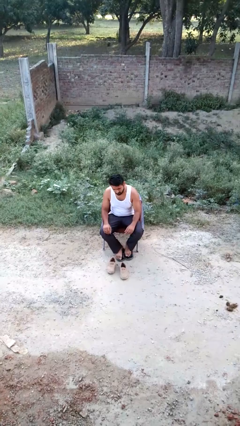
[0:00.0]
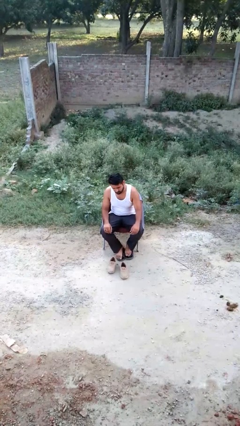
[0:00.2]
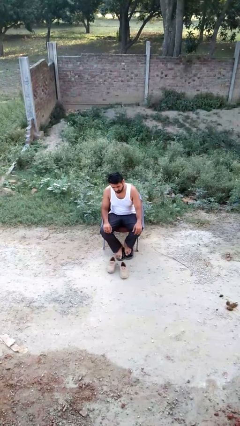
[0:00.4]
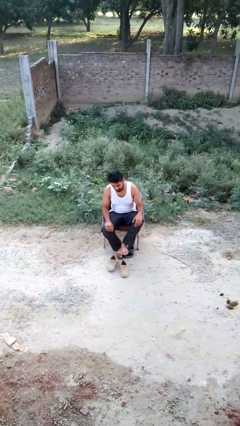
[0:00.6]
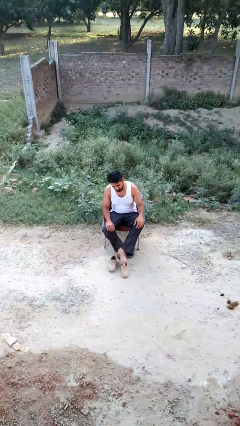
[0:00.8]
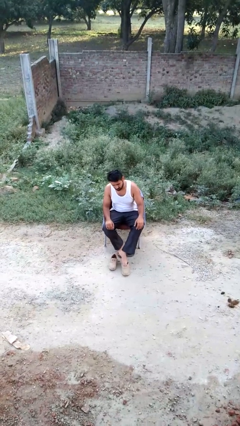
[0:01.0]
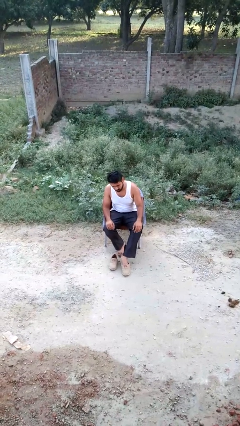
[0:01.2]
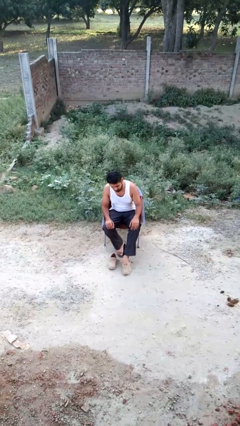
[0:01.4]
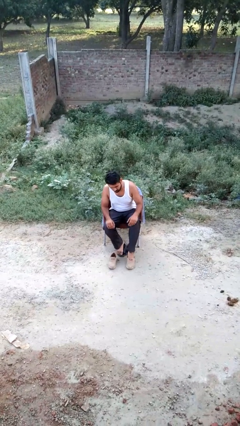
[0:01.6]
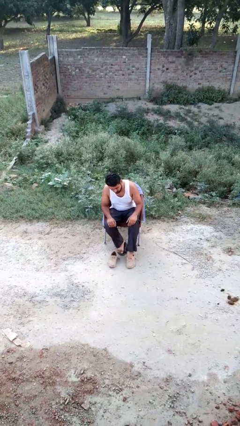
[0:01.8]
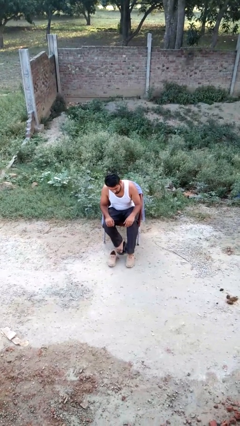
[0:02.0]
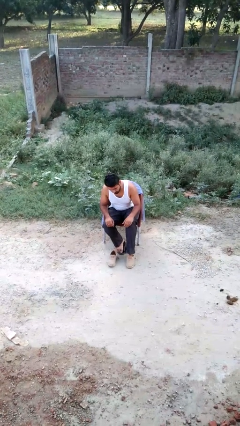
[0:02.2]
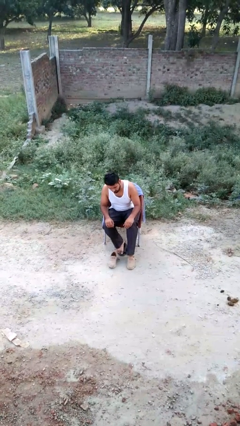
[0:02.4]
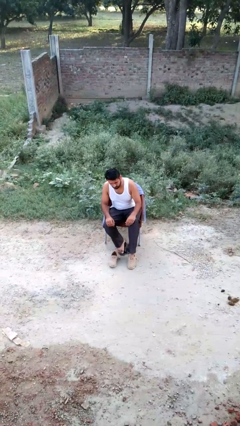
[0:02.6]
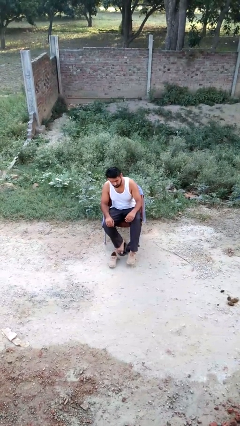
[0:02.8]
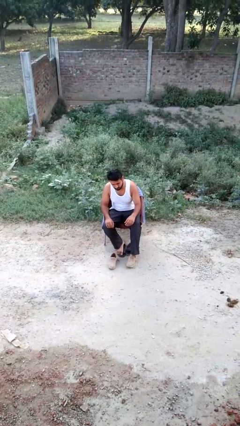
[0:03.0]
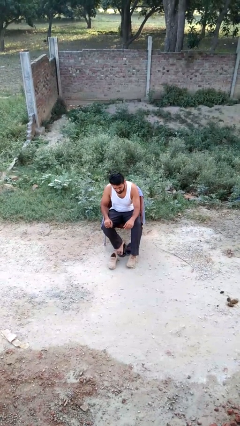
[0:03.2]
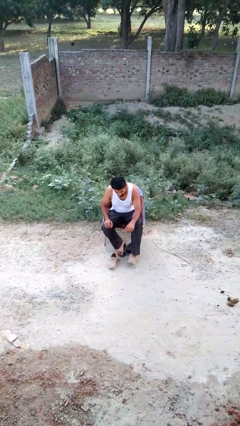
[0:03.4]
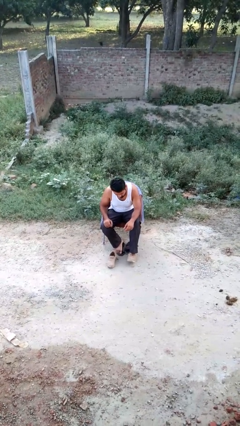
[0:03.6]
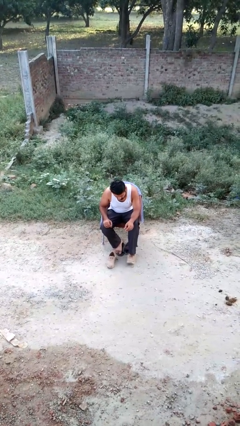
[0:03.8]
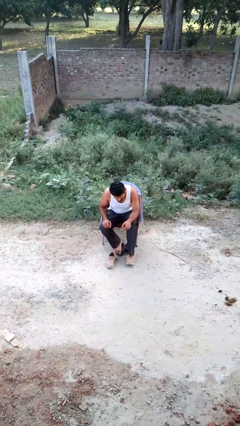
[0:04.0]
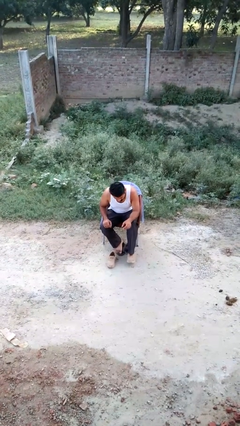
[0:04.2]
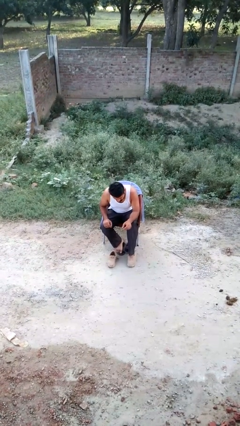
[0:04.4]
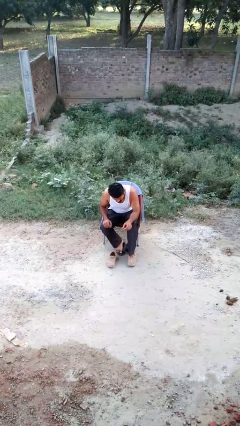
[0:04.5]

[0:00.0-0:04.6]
person puts on shoes

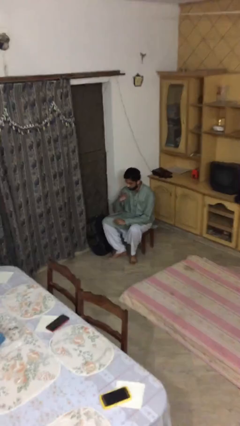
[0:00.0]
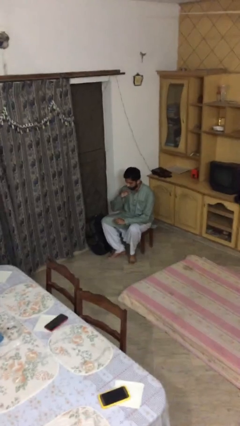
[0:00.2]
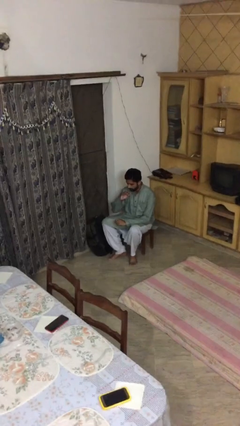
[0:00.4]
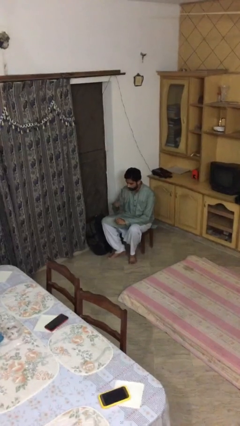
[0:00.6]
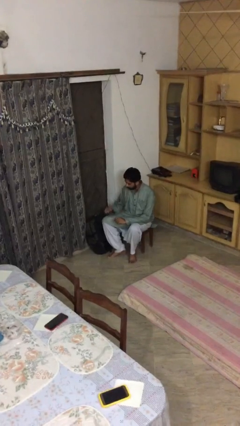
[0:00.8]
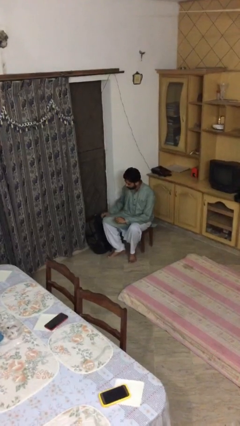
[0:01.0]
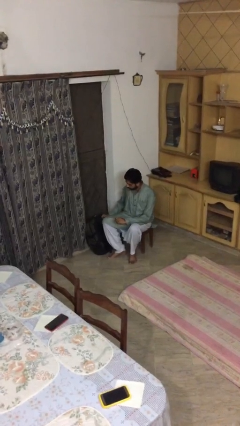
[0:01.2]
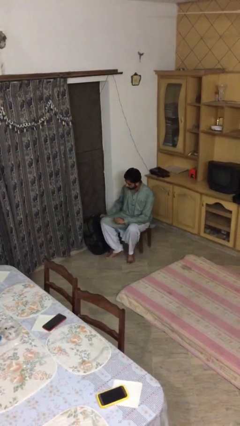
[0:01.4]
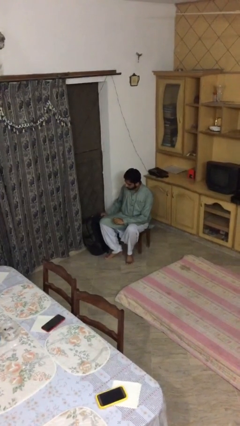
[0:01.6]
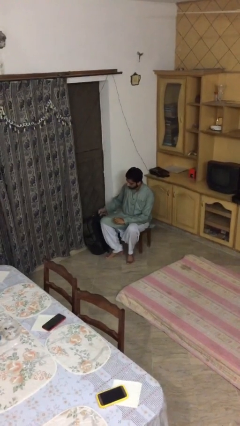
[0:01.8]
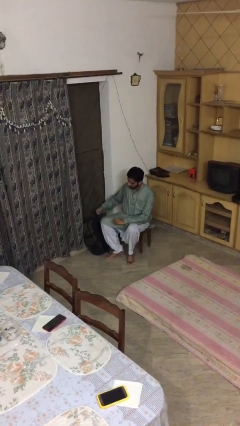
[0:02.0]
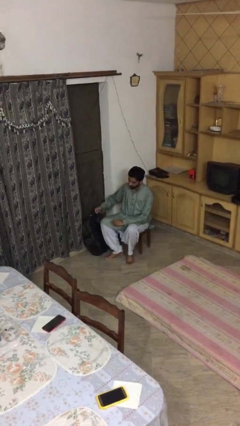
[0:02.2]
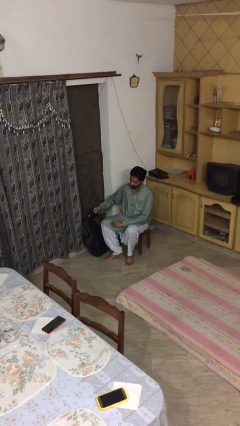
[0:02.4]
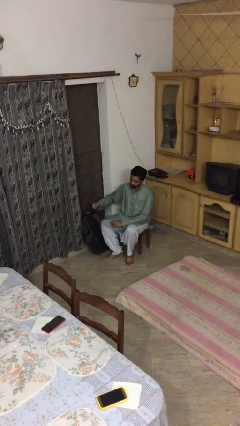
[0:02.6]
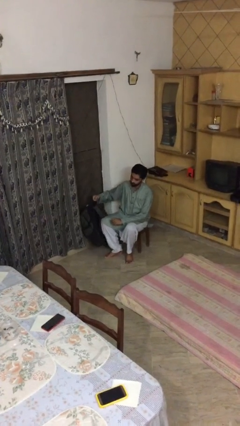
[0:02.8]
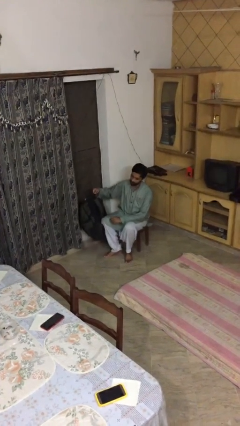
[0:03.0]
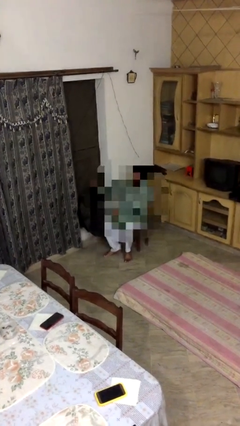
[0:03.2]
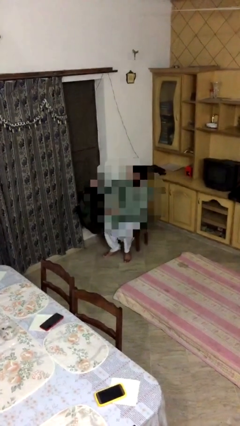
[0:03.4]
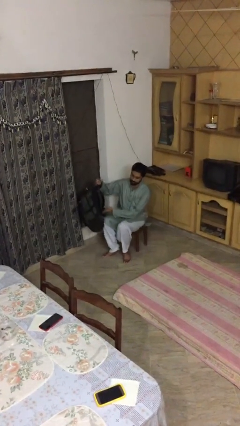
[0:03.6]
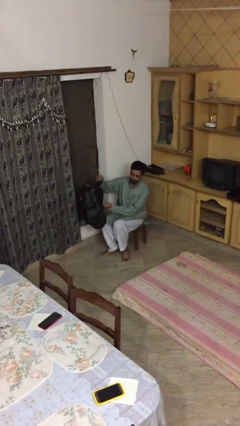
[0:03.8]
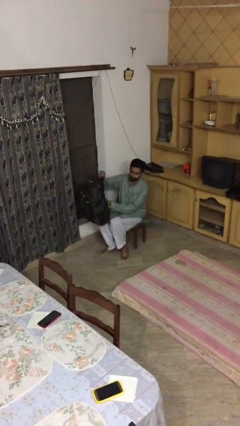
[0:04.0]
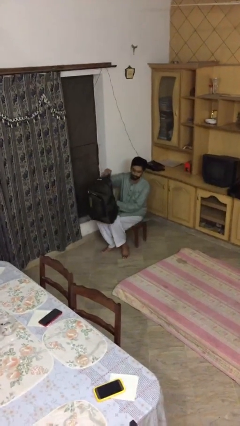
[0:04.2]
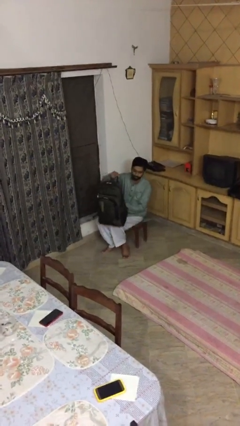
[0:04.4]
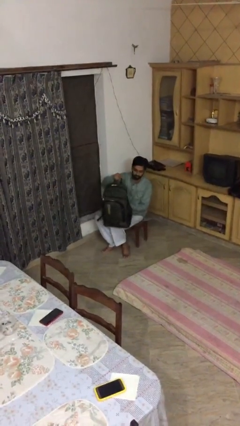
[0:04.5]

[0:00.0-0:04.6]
person picks up object from floor

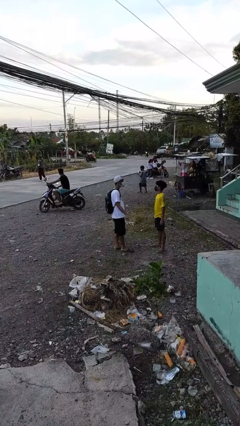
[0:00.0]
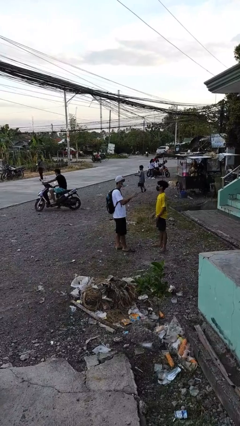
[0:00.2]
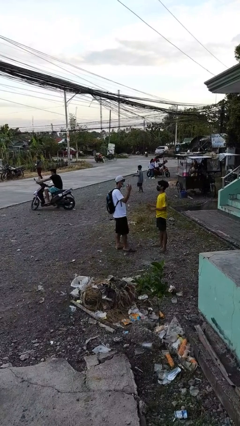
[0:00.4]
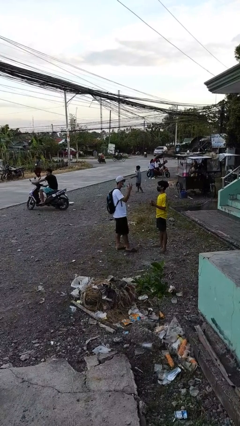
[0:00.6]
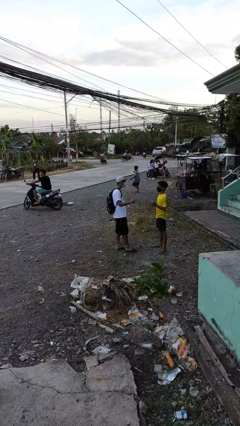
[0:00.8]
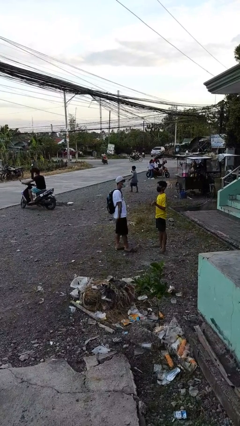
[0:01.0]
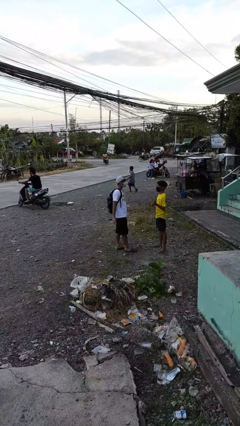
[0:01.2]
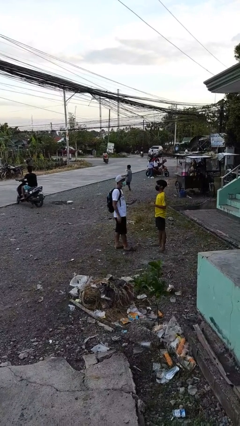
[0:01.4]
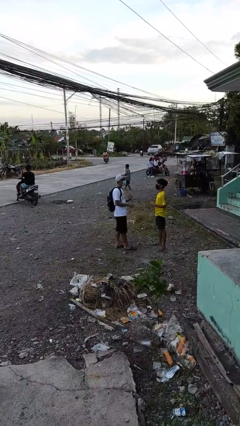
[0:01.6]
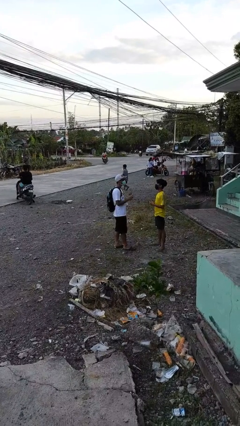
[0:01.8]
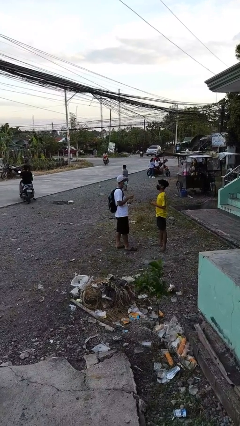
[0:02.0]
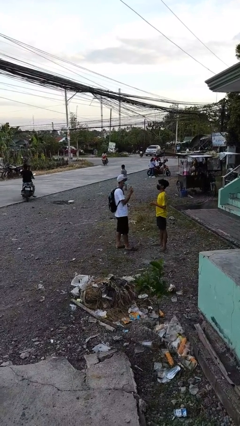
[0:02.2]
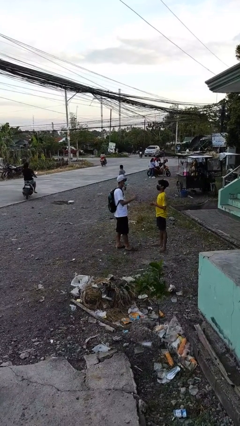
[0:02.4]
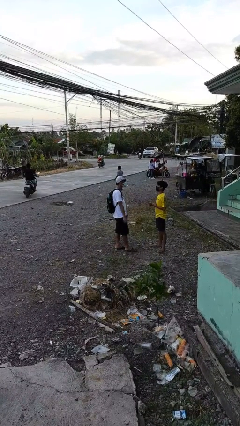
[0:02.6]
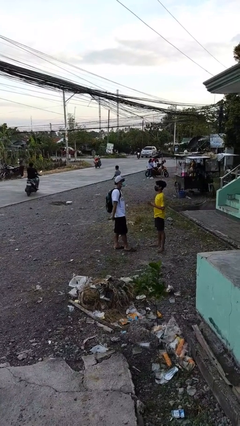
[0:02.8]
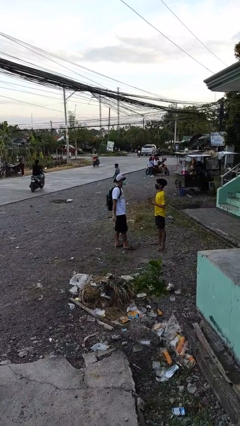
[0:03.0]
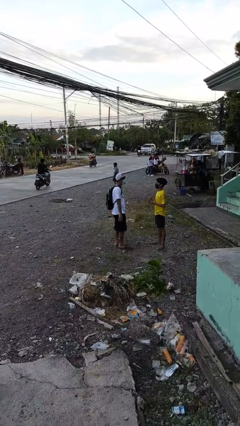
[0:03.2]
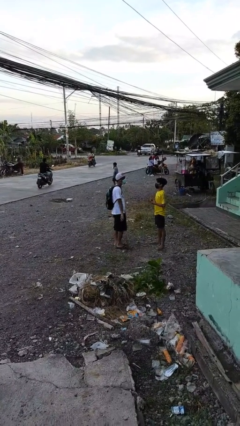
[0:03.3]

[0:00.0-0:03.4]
person talks to person

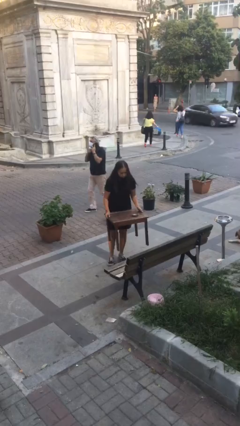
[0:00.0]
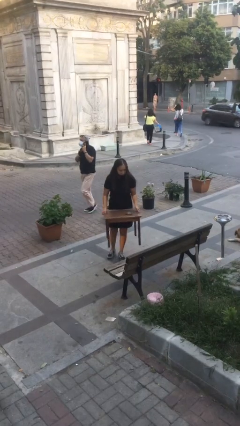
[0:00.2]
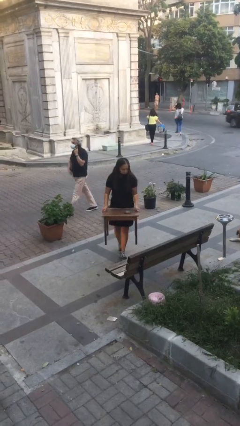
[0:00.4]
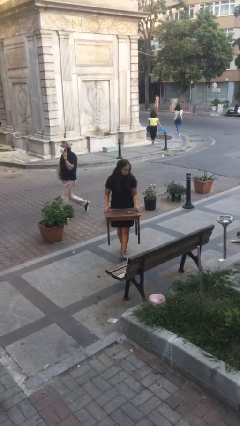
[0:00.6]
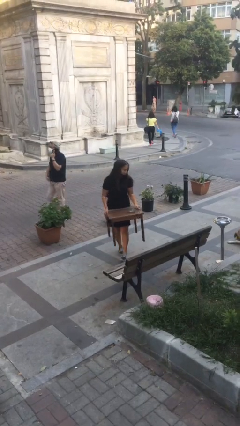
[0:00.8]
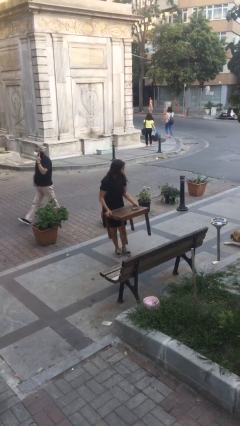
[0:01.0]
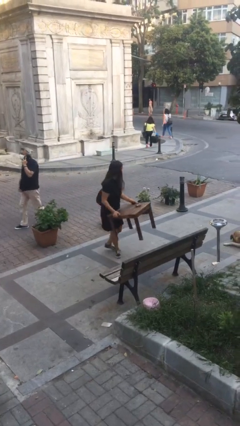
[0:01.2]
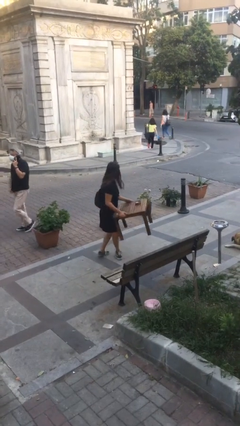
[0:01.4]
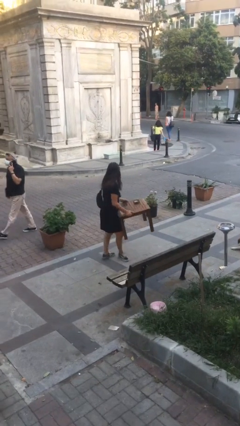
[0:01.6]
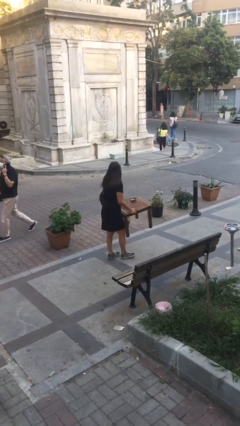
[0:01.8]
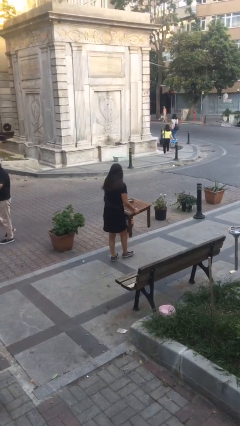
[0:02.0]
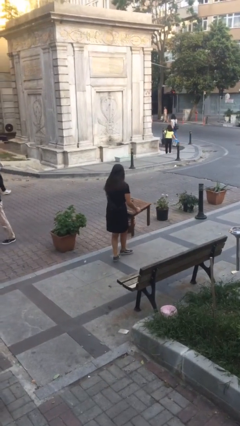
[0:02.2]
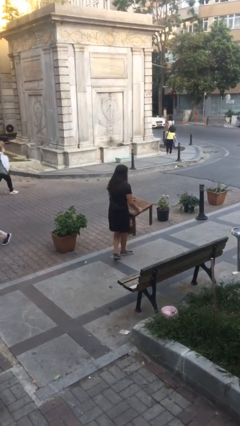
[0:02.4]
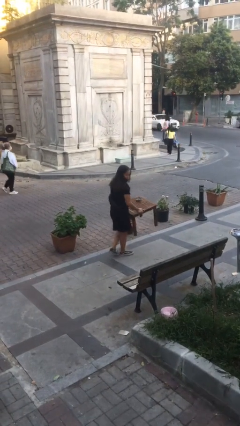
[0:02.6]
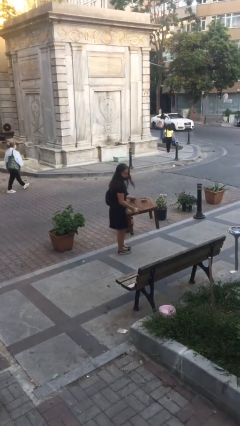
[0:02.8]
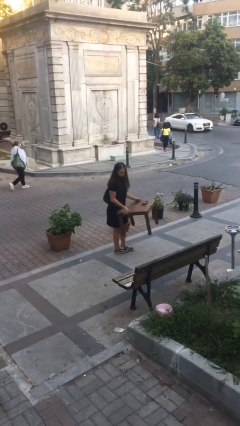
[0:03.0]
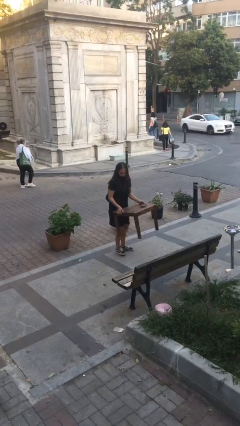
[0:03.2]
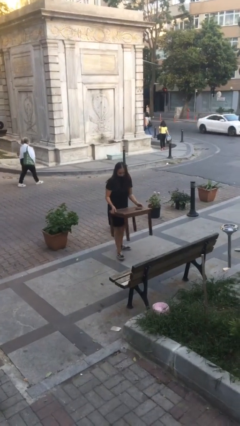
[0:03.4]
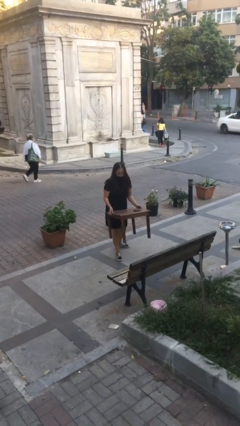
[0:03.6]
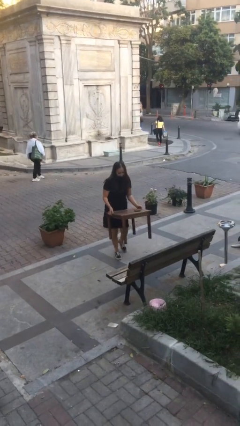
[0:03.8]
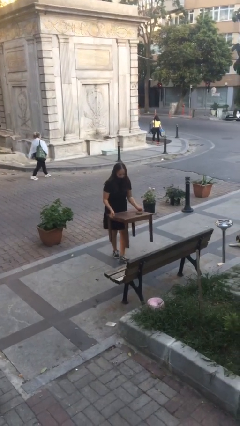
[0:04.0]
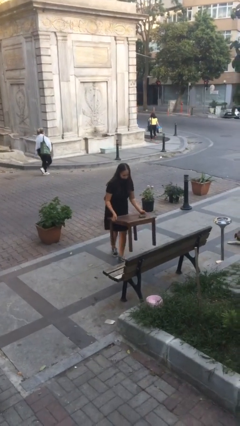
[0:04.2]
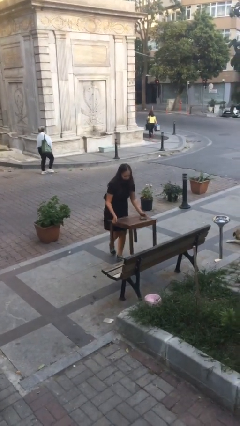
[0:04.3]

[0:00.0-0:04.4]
person carries heavy object

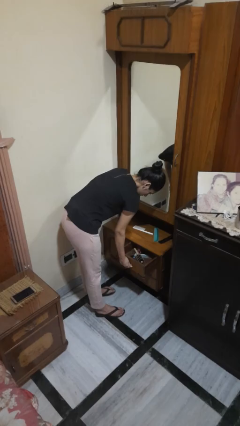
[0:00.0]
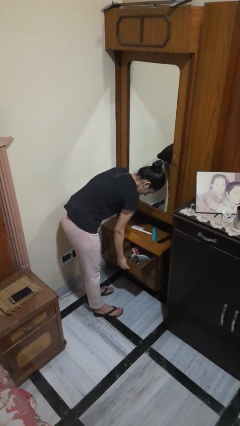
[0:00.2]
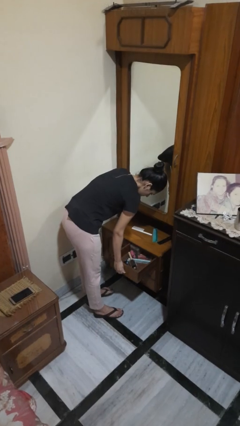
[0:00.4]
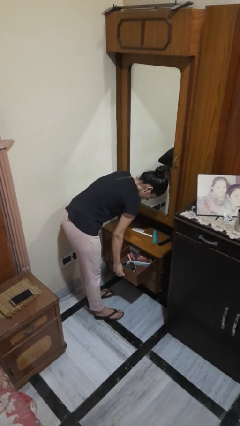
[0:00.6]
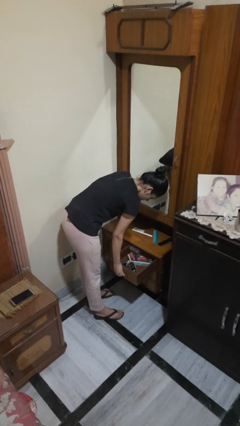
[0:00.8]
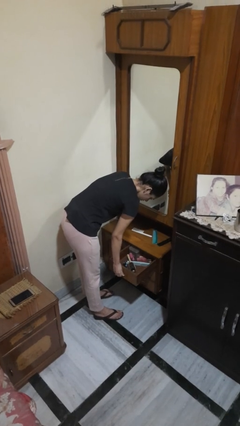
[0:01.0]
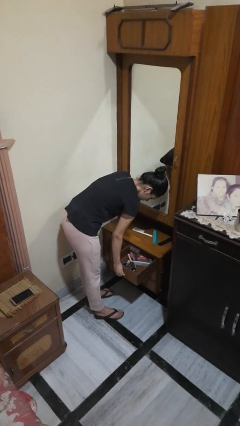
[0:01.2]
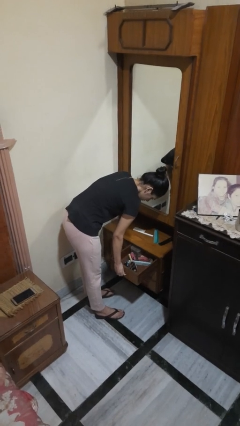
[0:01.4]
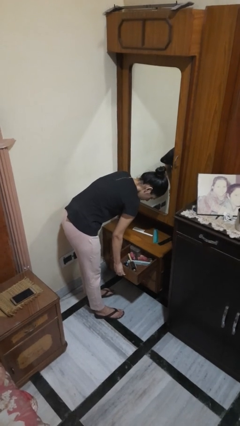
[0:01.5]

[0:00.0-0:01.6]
person opens dresser drawer
